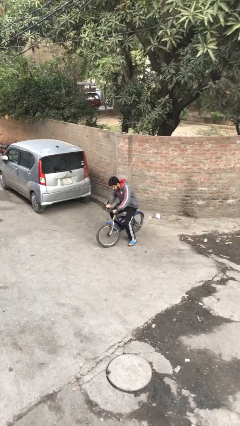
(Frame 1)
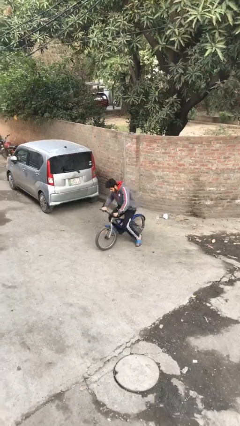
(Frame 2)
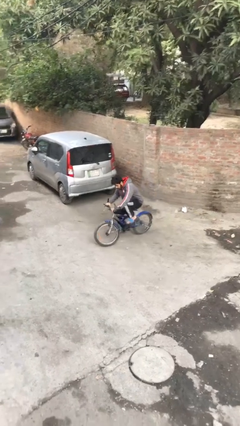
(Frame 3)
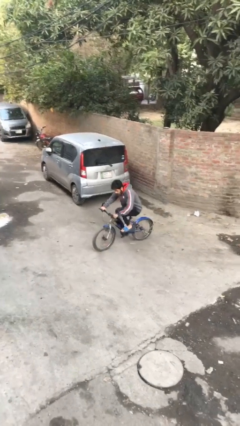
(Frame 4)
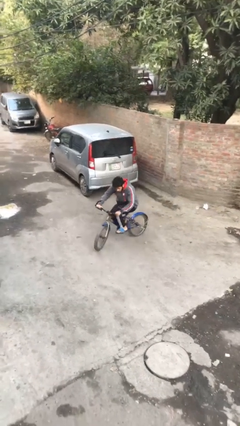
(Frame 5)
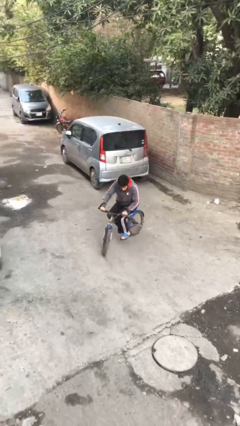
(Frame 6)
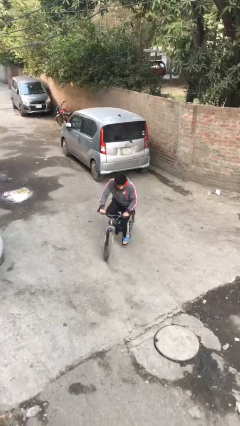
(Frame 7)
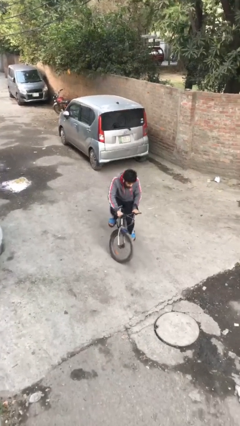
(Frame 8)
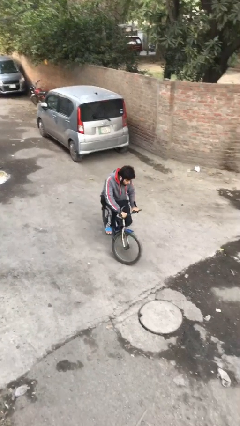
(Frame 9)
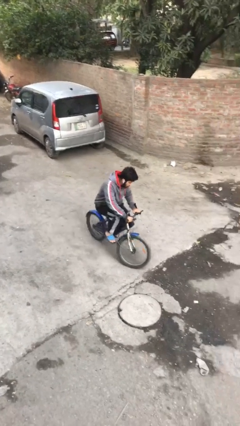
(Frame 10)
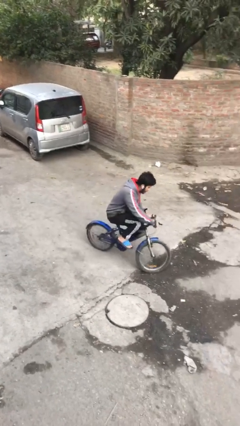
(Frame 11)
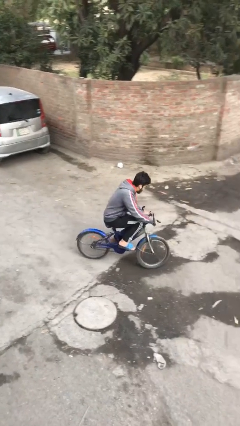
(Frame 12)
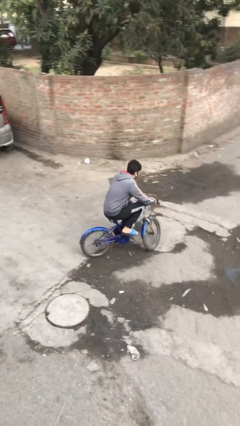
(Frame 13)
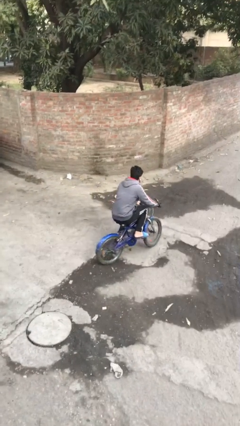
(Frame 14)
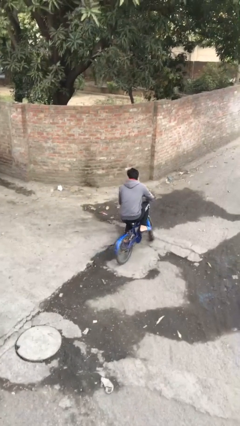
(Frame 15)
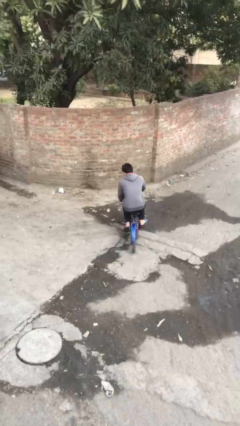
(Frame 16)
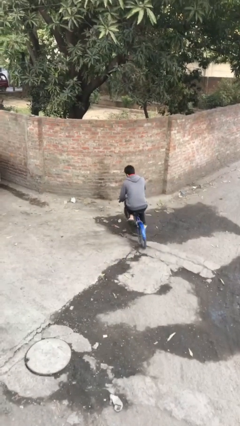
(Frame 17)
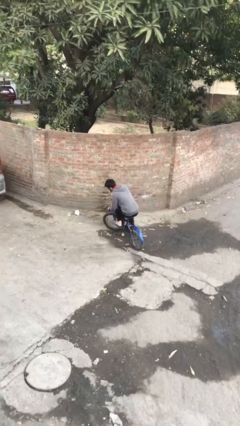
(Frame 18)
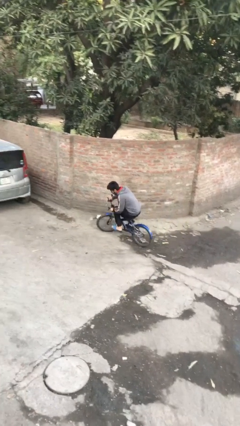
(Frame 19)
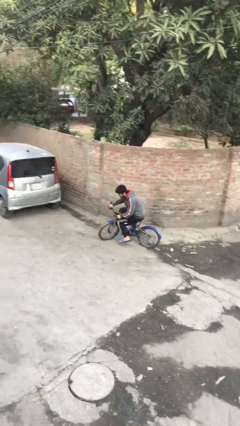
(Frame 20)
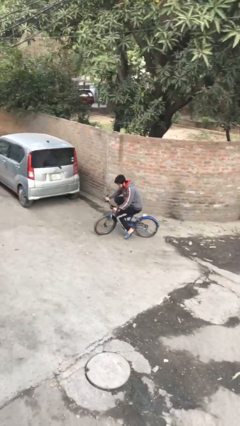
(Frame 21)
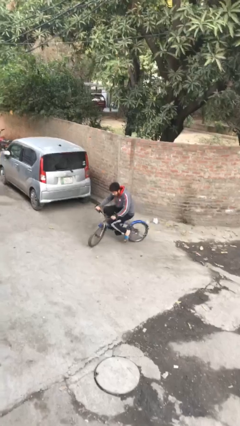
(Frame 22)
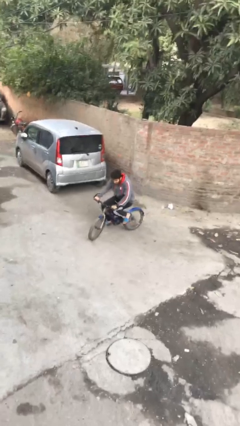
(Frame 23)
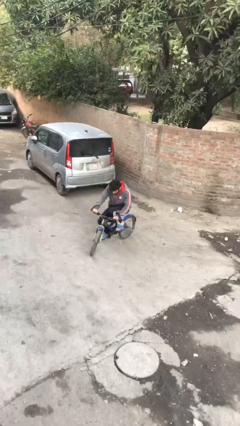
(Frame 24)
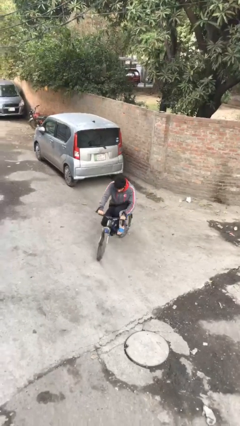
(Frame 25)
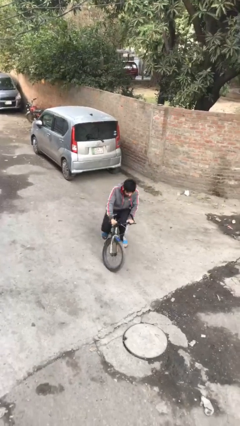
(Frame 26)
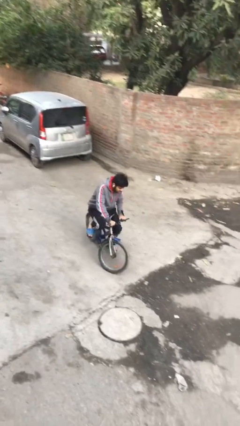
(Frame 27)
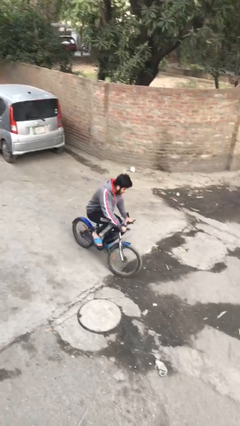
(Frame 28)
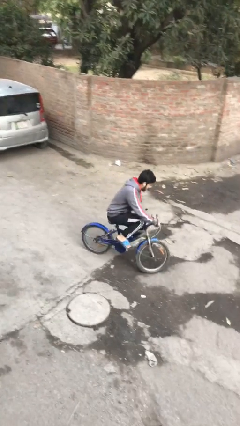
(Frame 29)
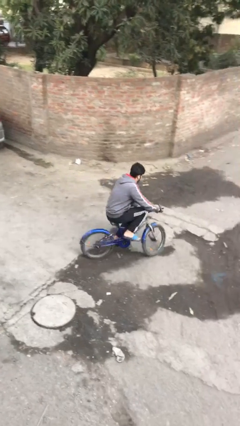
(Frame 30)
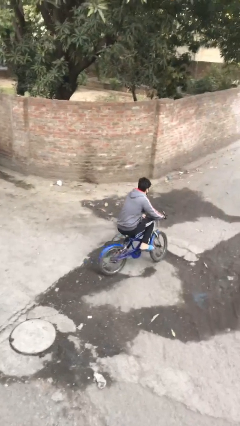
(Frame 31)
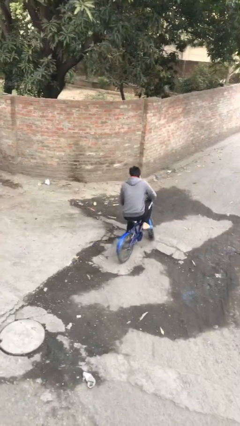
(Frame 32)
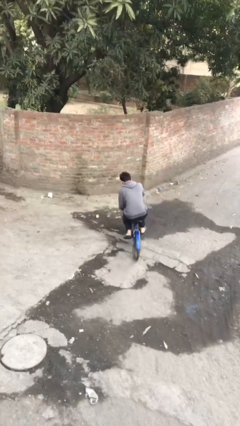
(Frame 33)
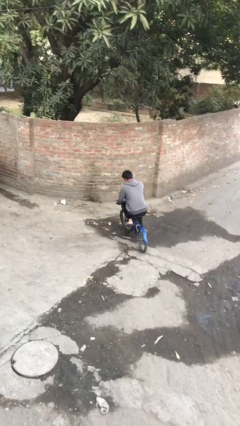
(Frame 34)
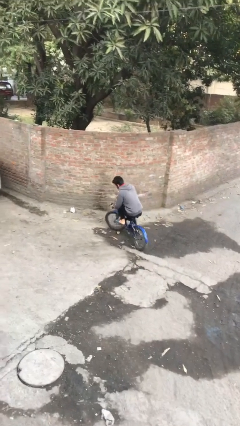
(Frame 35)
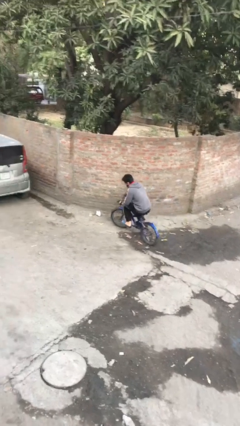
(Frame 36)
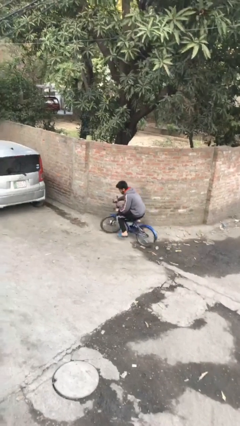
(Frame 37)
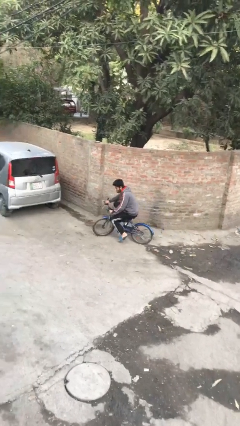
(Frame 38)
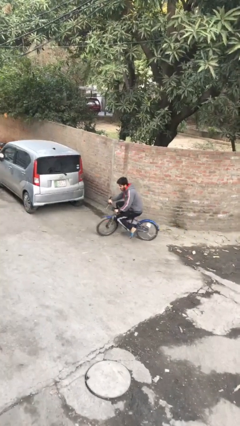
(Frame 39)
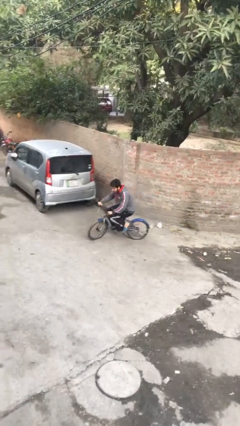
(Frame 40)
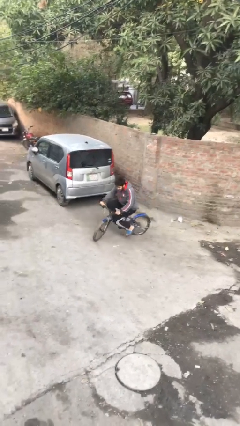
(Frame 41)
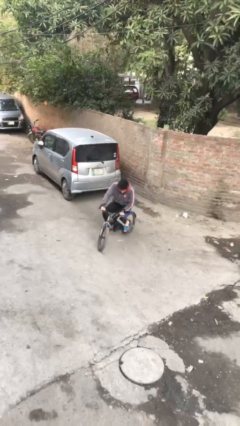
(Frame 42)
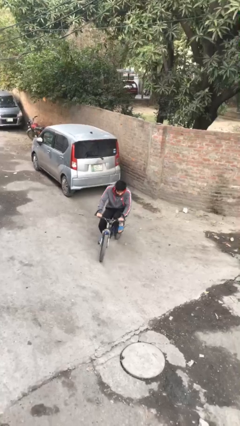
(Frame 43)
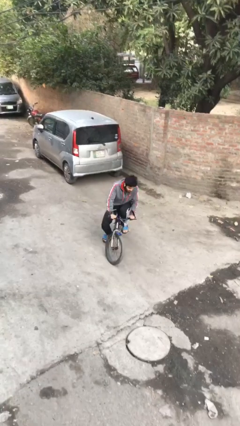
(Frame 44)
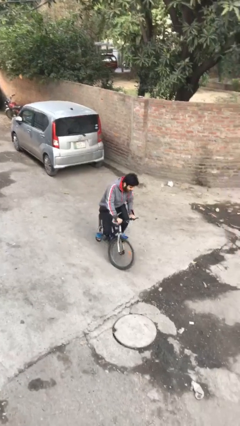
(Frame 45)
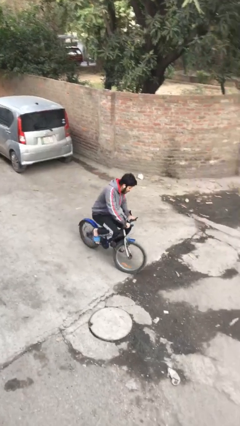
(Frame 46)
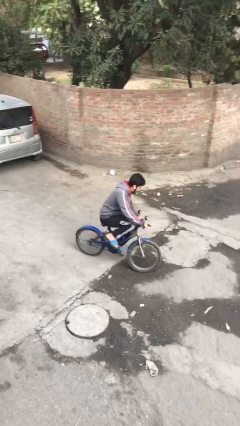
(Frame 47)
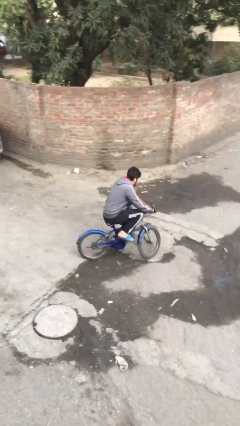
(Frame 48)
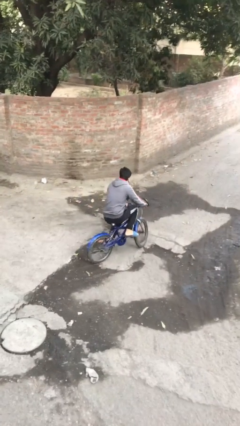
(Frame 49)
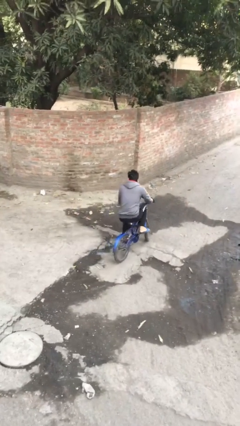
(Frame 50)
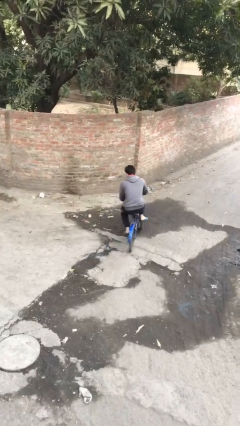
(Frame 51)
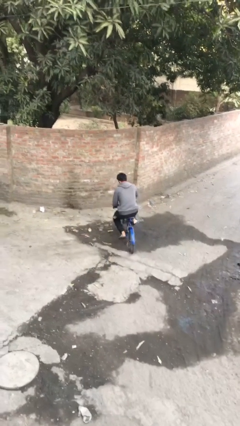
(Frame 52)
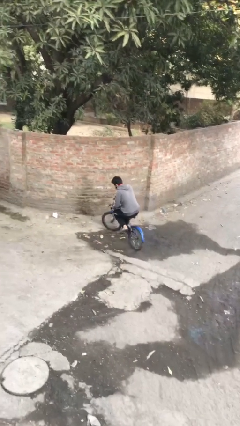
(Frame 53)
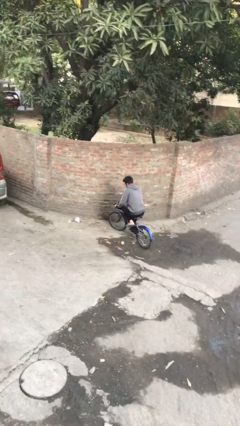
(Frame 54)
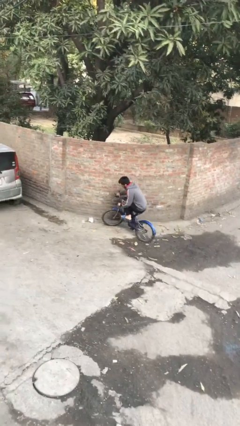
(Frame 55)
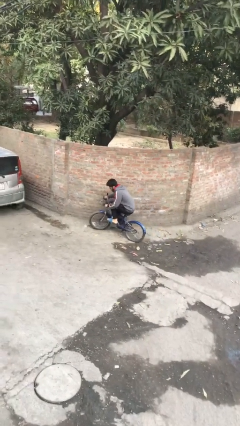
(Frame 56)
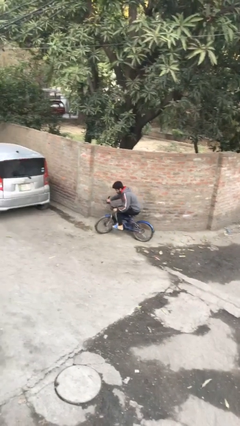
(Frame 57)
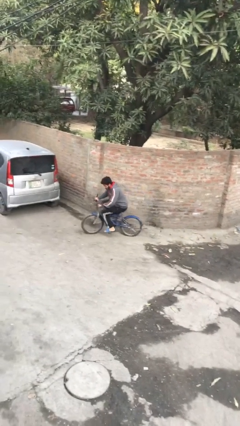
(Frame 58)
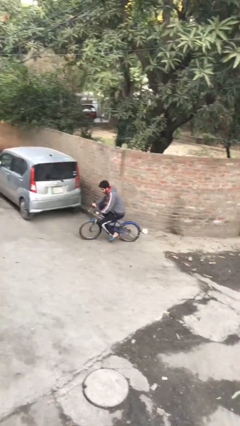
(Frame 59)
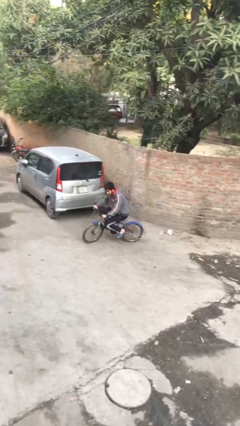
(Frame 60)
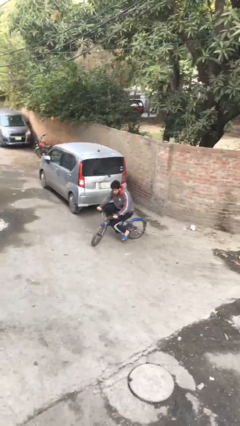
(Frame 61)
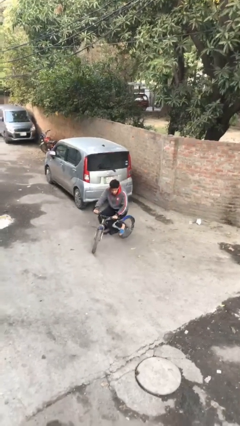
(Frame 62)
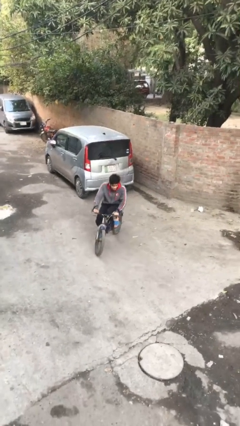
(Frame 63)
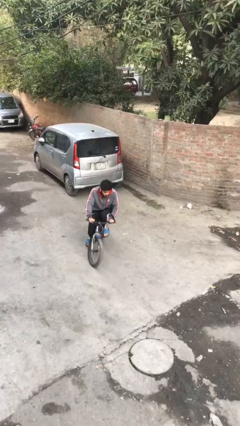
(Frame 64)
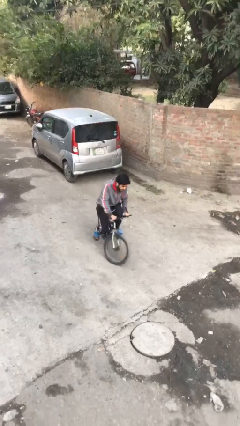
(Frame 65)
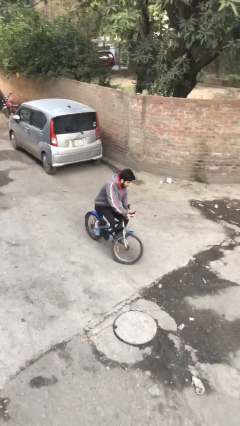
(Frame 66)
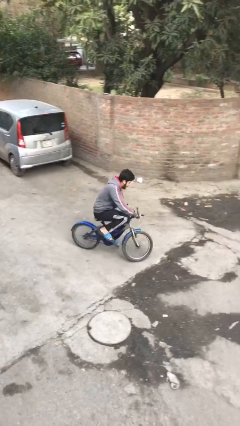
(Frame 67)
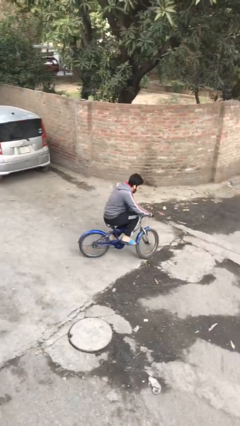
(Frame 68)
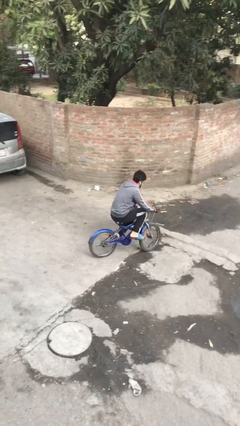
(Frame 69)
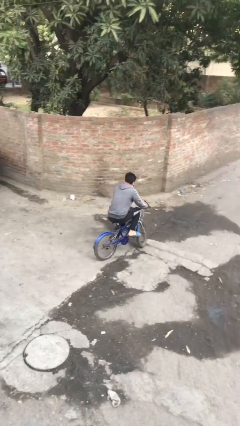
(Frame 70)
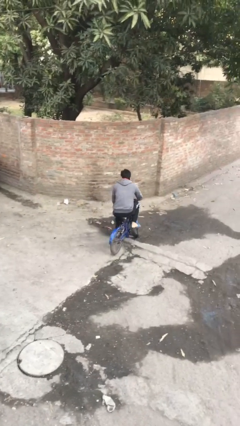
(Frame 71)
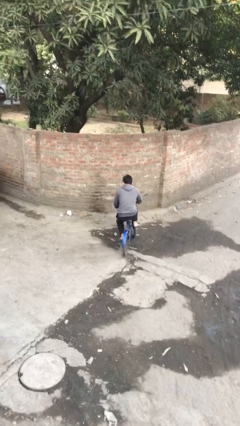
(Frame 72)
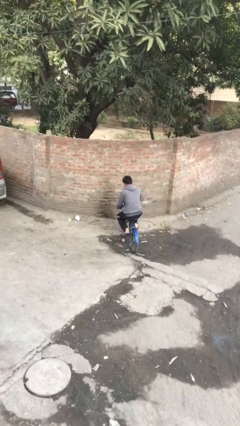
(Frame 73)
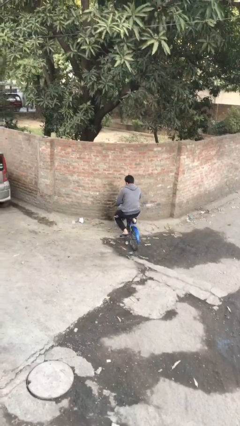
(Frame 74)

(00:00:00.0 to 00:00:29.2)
person rides bicycle

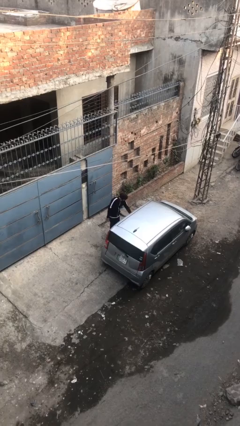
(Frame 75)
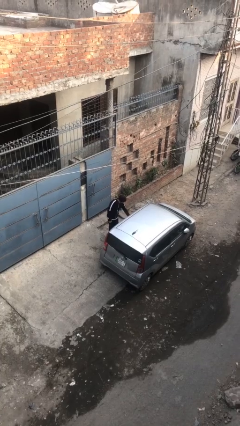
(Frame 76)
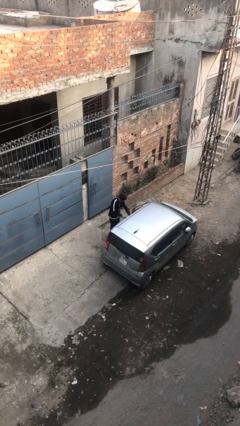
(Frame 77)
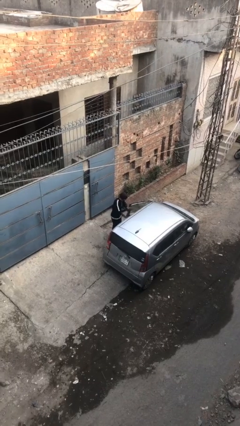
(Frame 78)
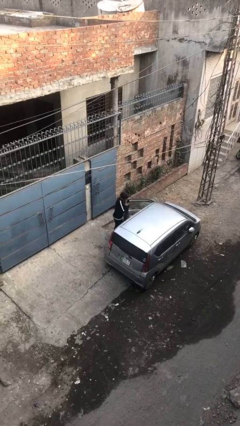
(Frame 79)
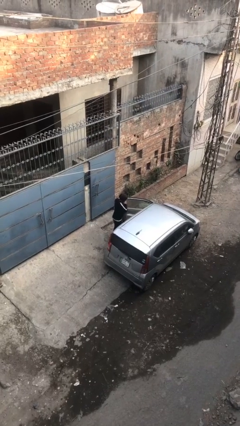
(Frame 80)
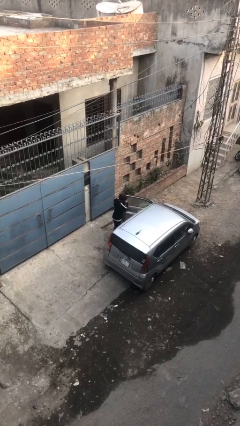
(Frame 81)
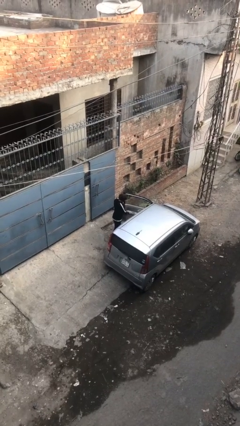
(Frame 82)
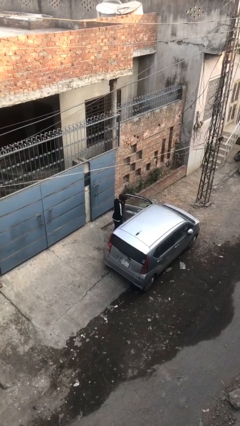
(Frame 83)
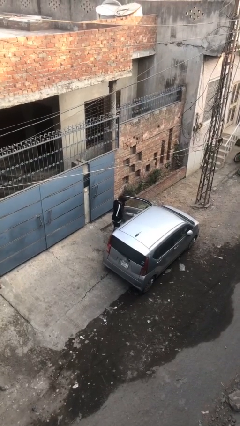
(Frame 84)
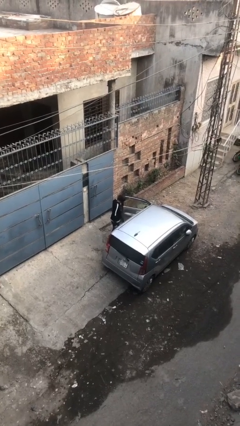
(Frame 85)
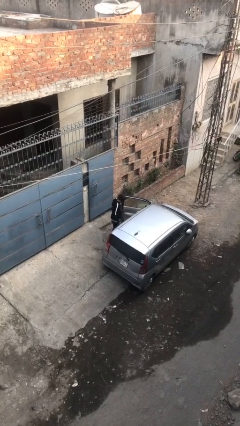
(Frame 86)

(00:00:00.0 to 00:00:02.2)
person opens car door

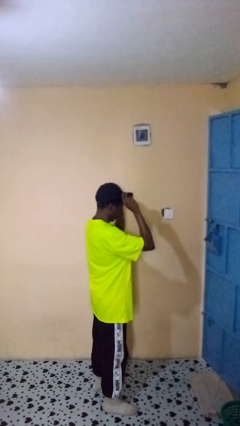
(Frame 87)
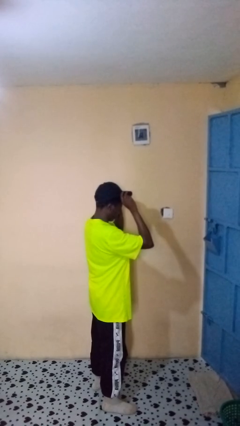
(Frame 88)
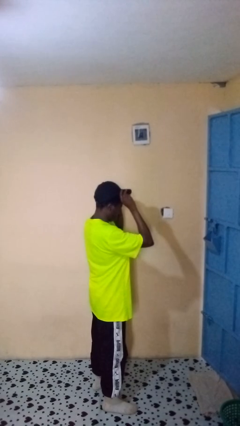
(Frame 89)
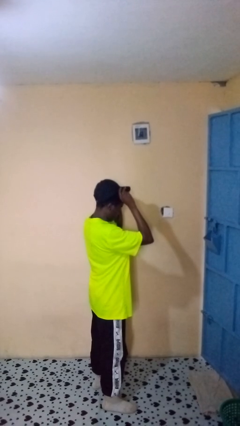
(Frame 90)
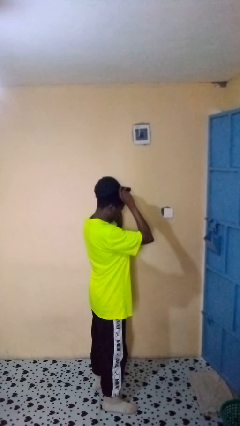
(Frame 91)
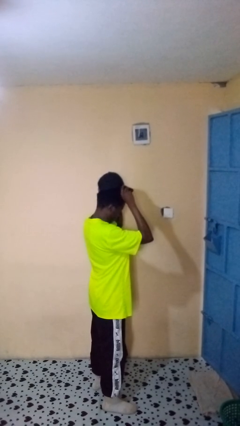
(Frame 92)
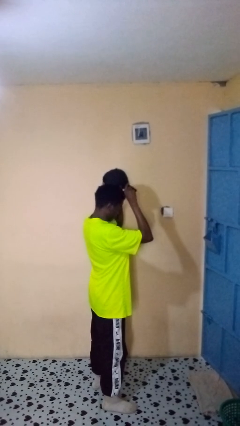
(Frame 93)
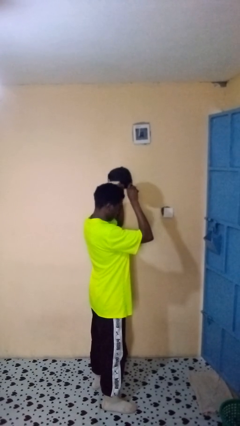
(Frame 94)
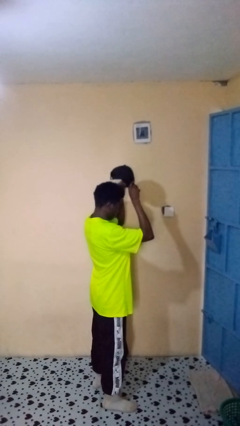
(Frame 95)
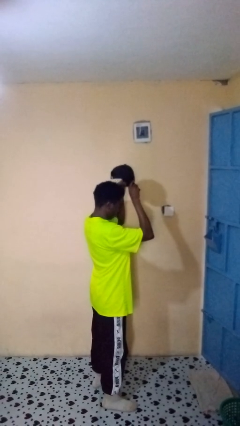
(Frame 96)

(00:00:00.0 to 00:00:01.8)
person takes off hat
